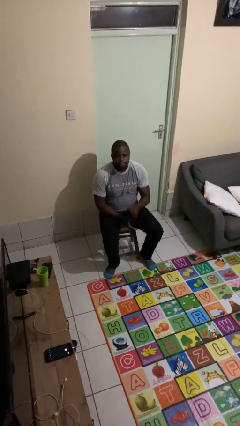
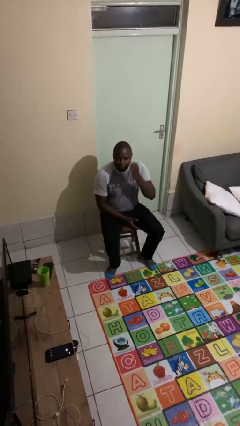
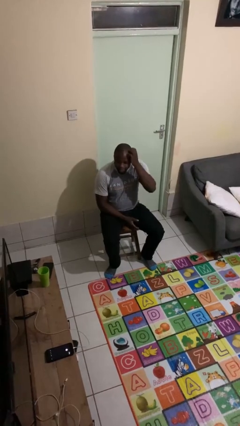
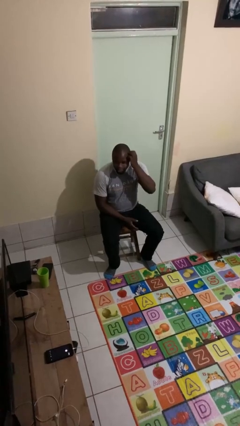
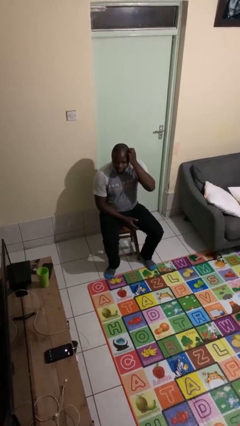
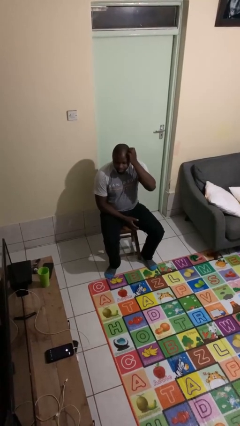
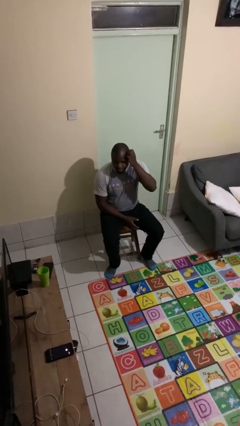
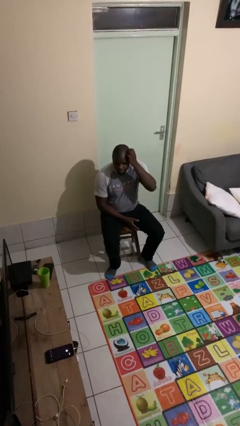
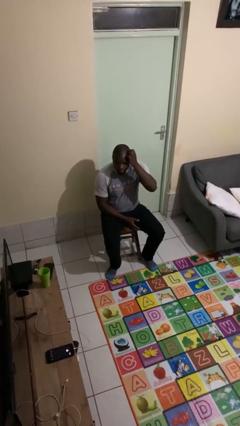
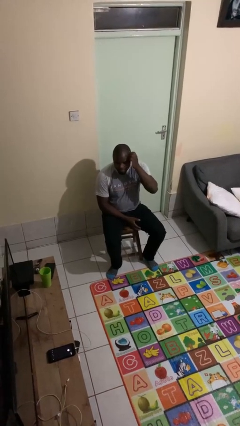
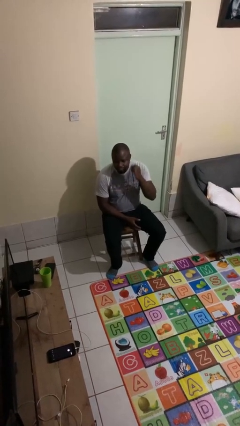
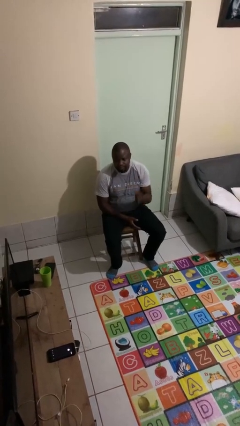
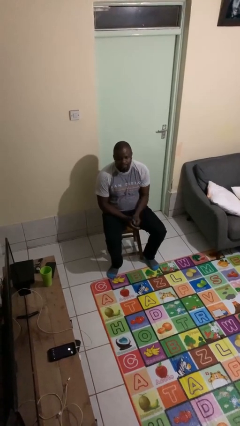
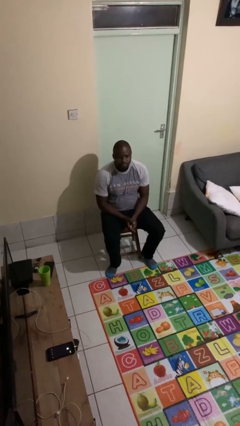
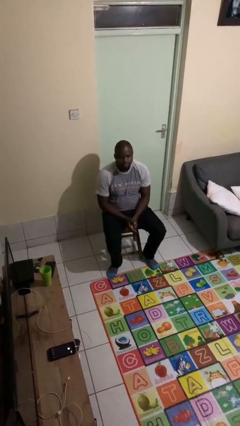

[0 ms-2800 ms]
person scratches face

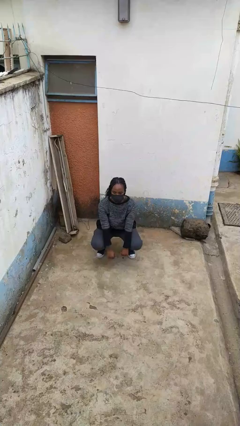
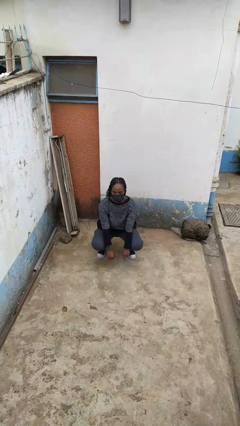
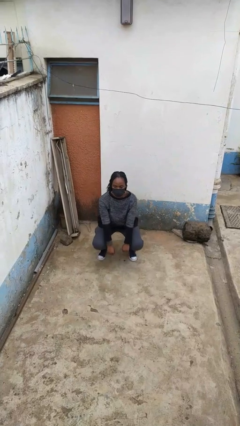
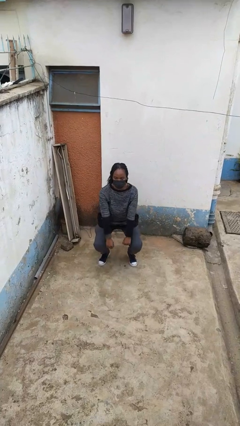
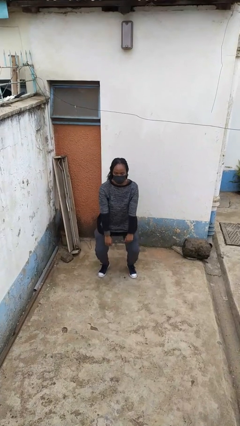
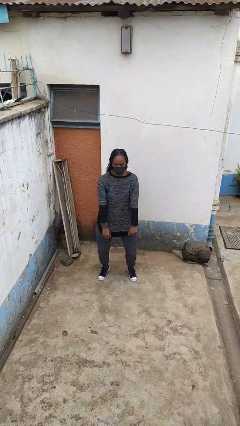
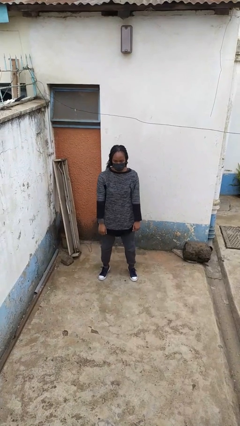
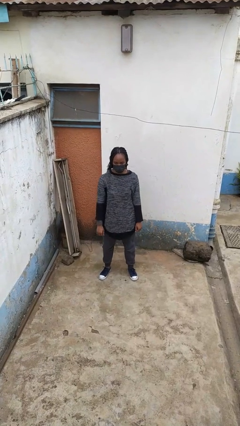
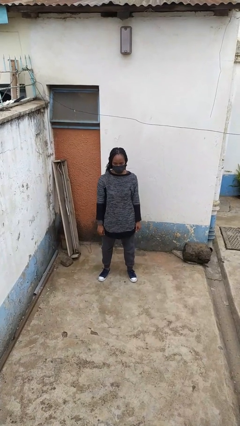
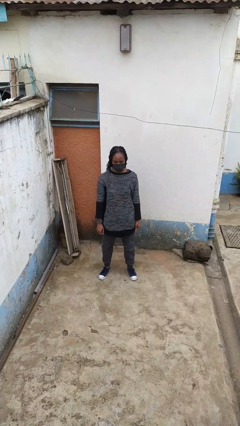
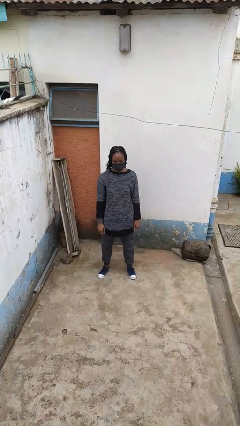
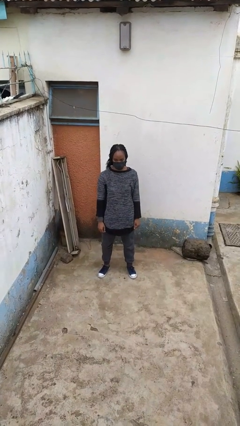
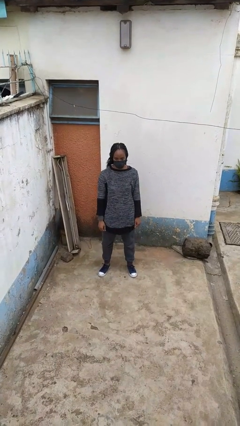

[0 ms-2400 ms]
person stands up

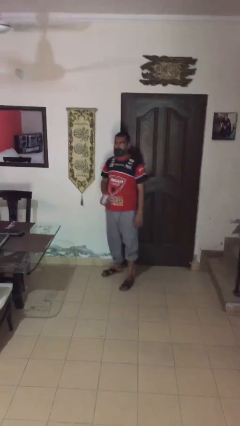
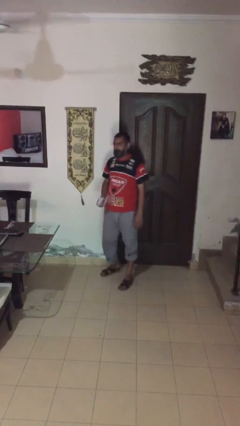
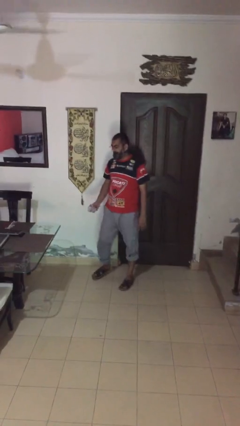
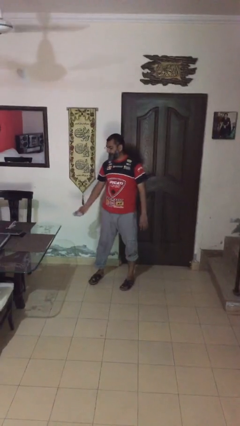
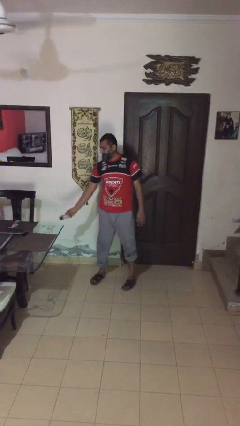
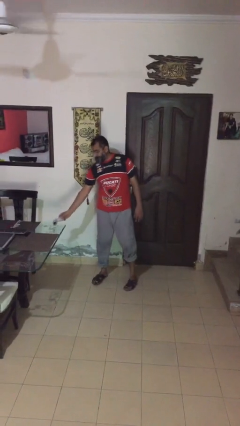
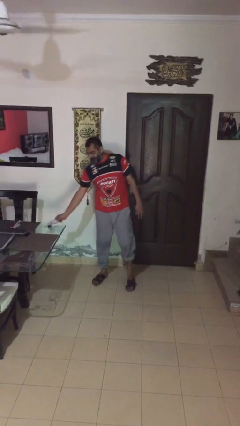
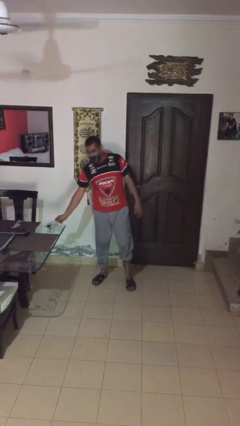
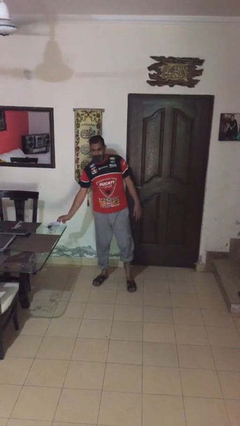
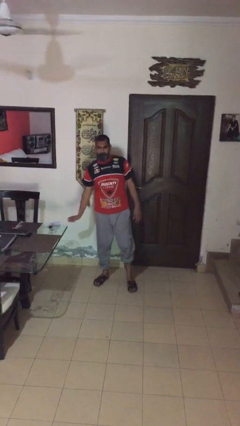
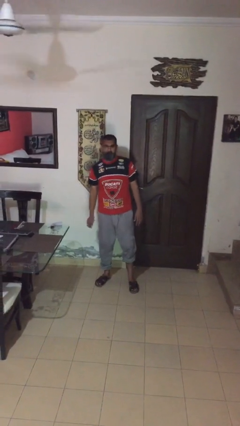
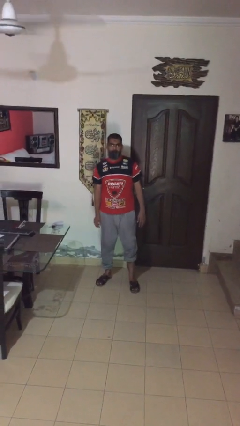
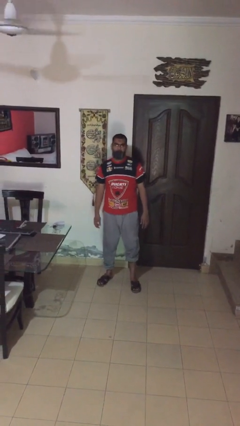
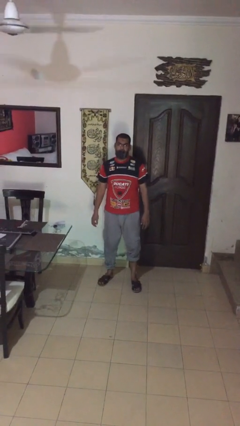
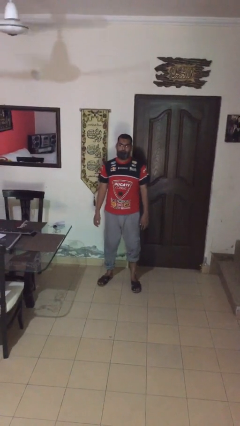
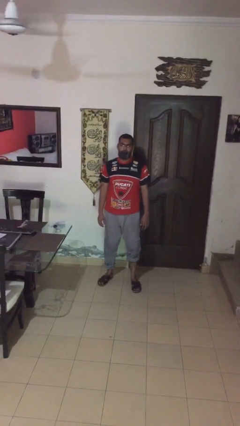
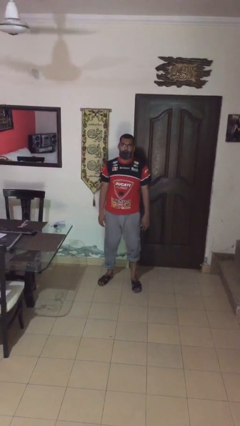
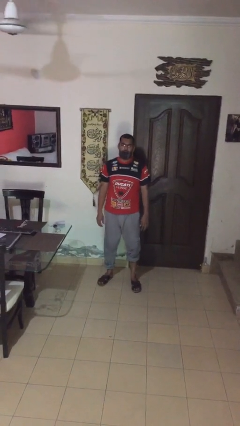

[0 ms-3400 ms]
person puts down object on table

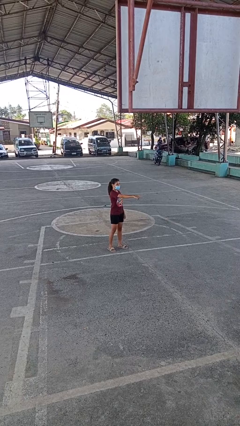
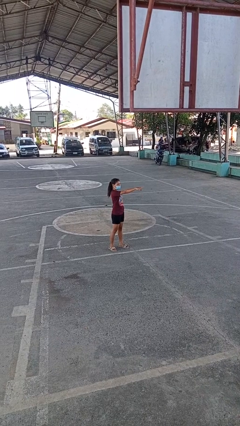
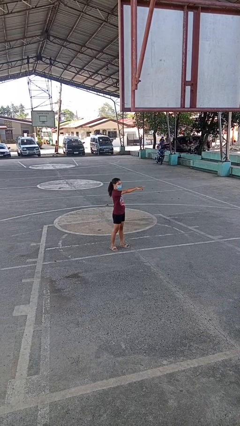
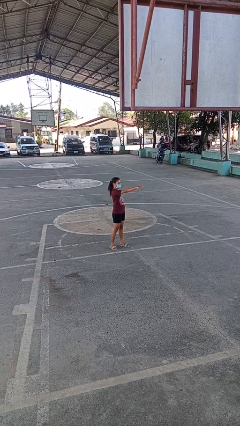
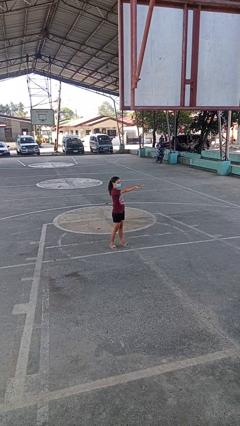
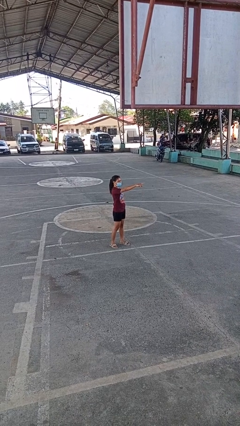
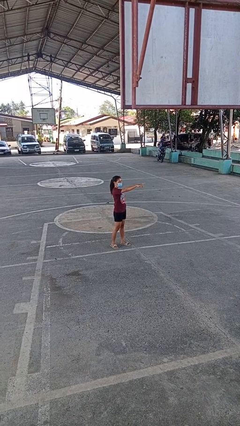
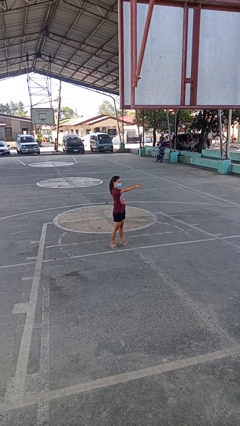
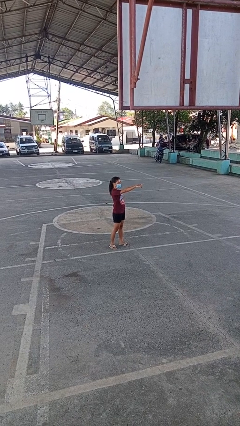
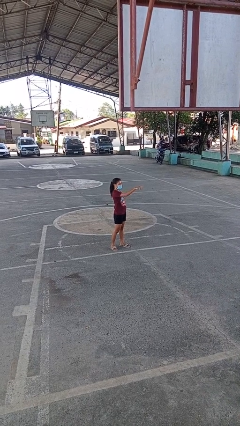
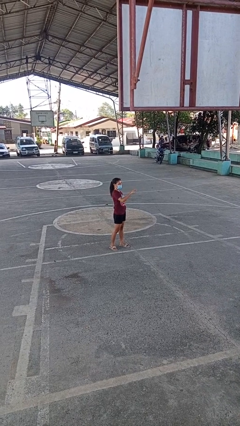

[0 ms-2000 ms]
person points at person

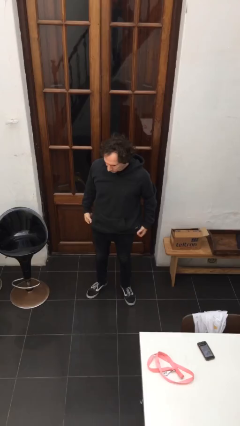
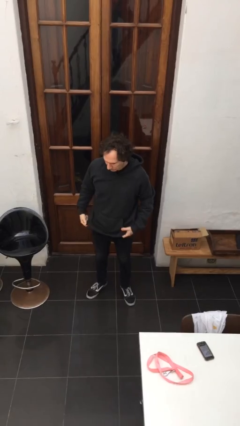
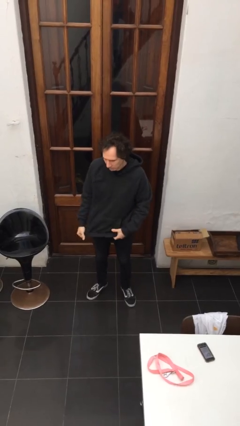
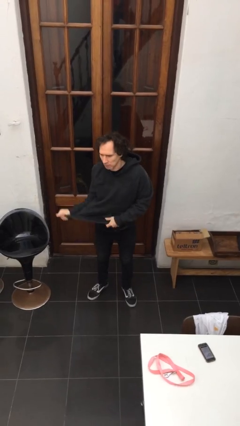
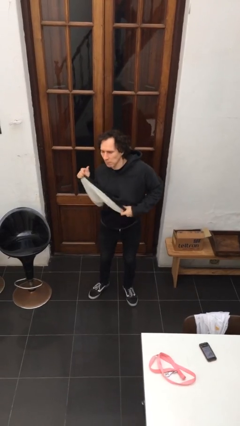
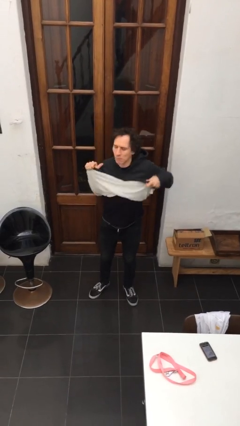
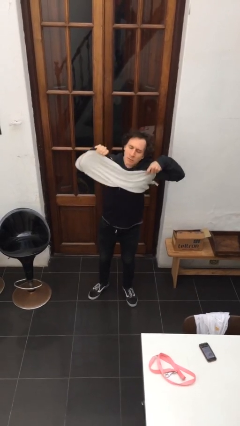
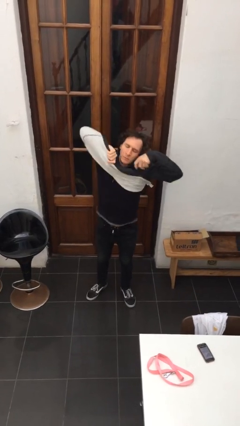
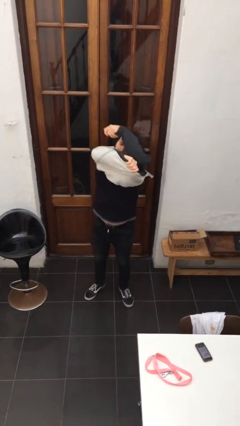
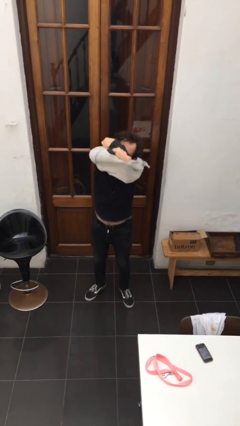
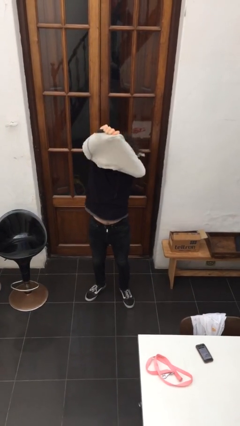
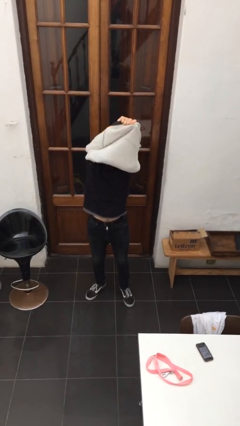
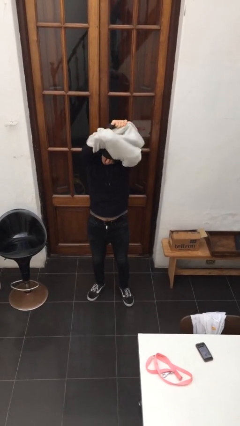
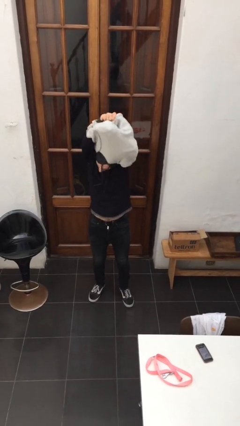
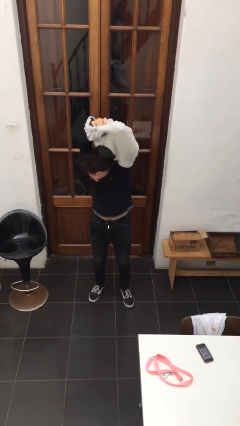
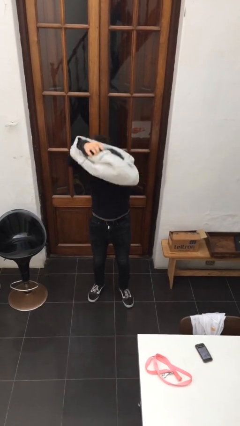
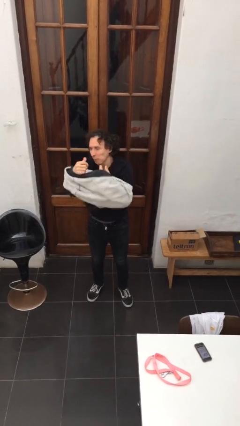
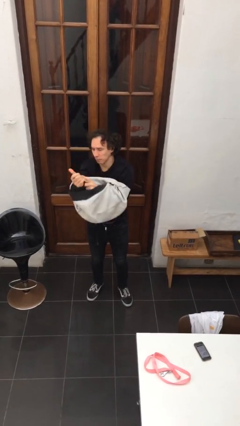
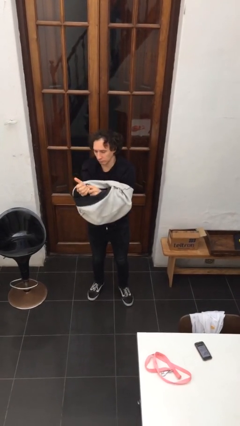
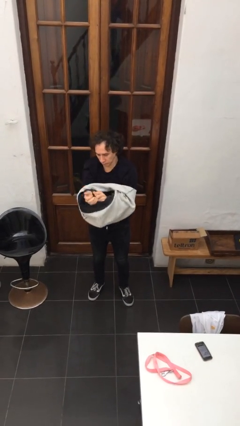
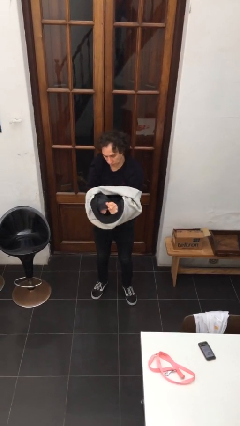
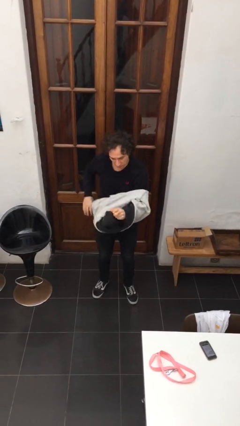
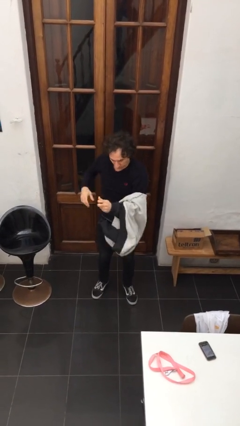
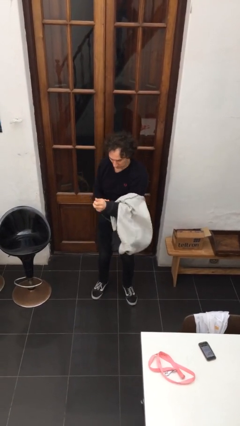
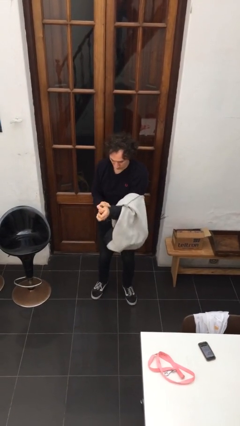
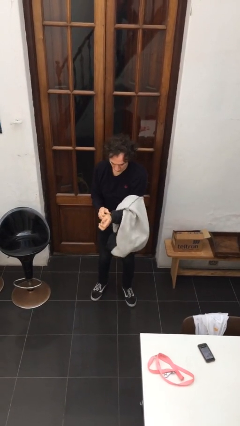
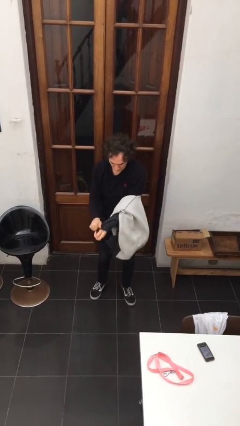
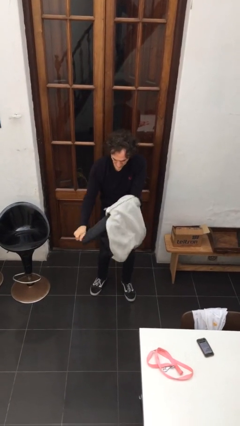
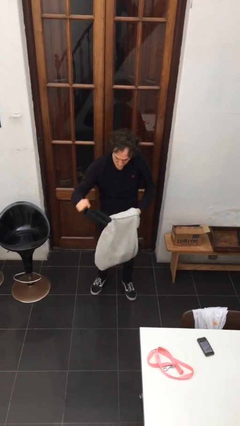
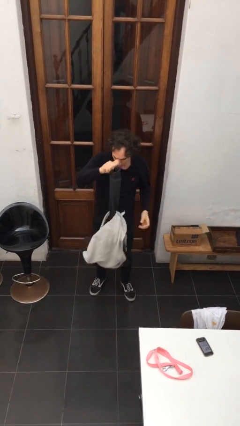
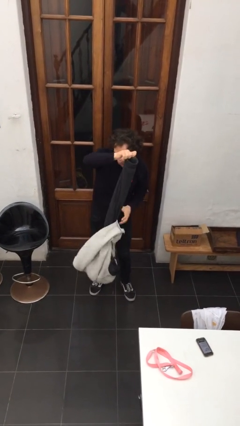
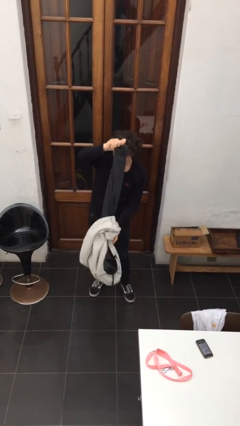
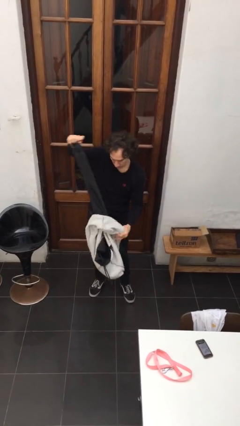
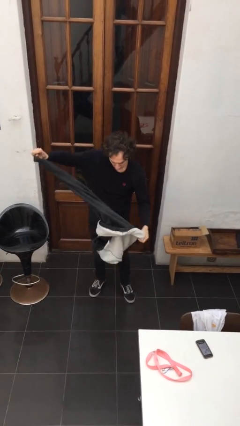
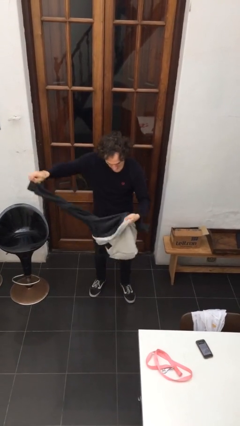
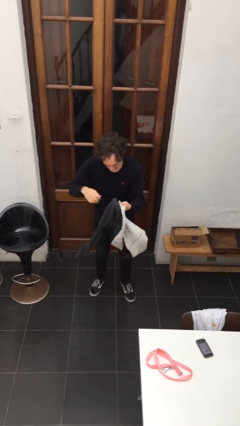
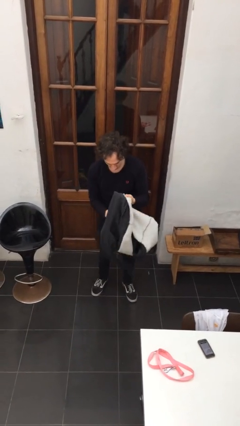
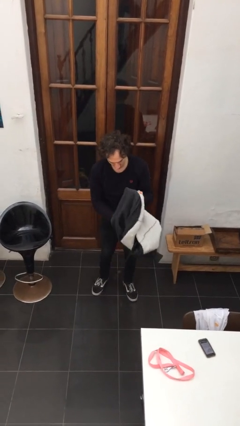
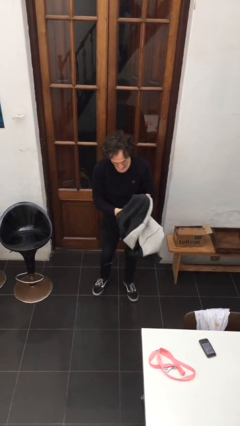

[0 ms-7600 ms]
person takes off hoodie
